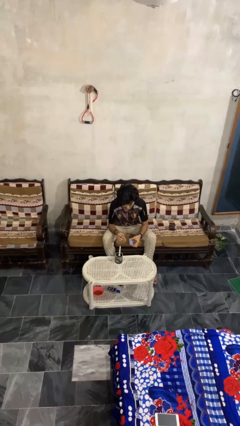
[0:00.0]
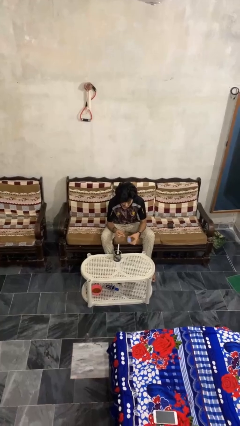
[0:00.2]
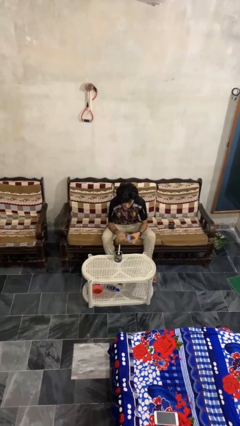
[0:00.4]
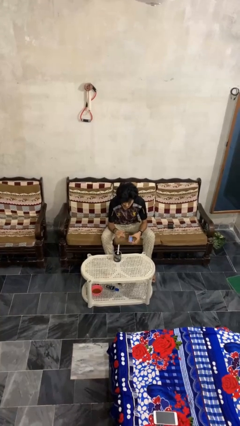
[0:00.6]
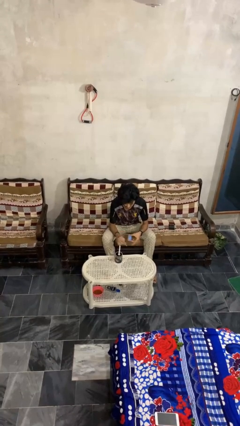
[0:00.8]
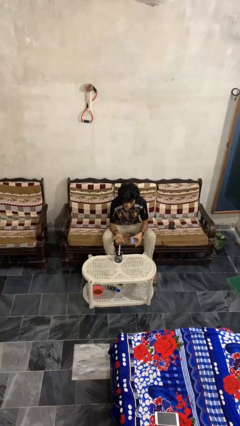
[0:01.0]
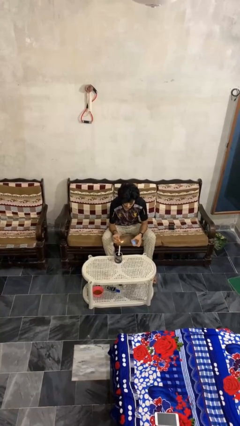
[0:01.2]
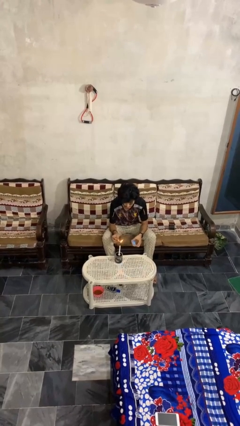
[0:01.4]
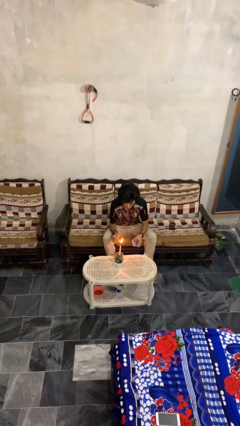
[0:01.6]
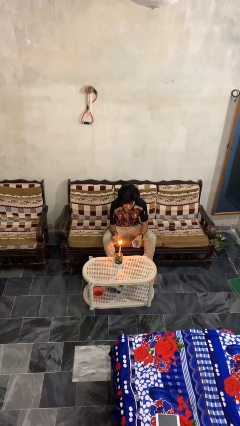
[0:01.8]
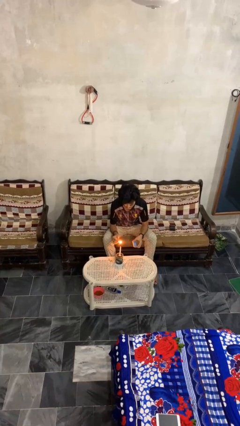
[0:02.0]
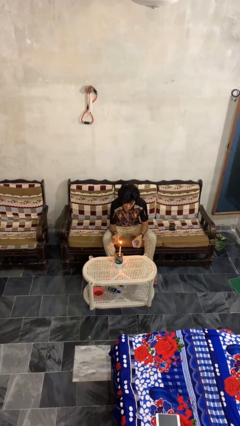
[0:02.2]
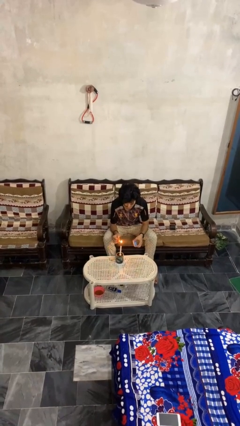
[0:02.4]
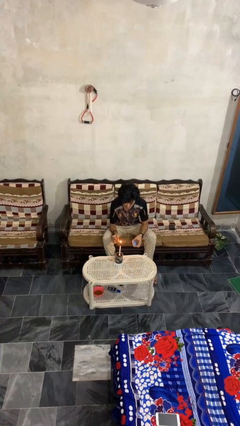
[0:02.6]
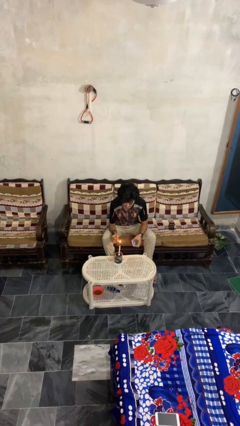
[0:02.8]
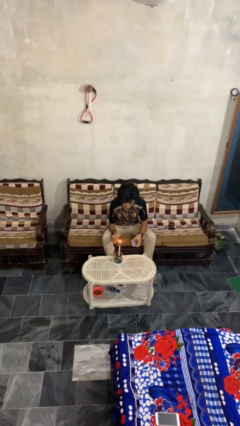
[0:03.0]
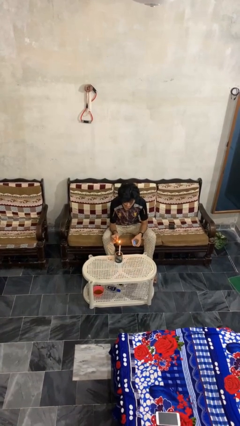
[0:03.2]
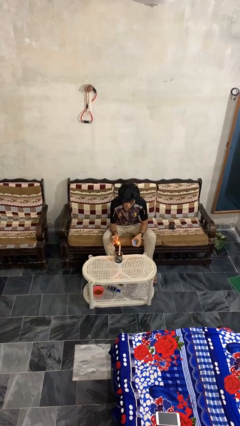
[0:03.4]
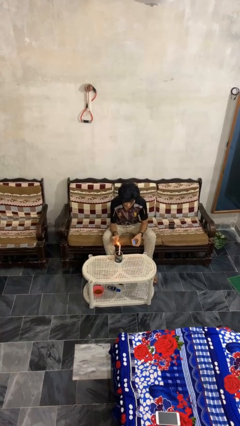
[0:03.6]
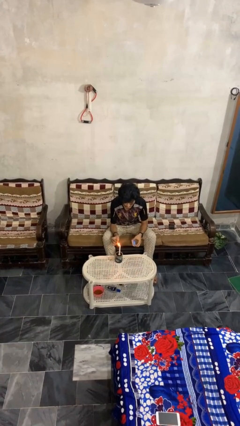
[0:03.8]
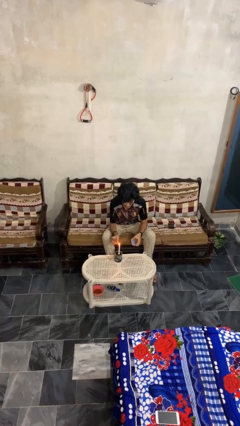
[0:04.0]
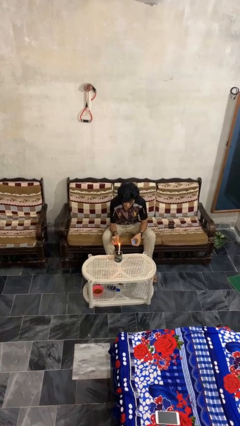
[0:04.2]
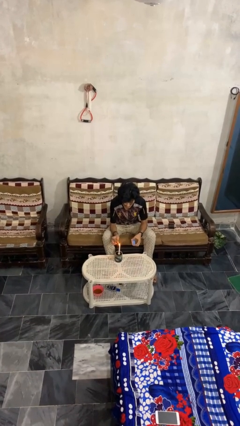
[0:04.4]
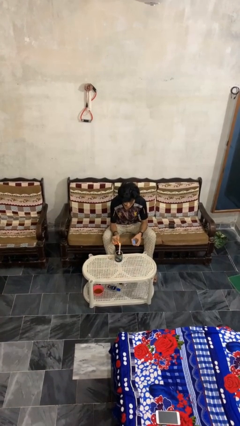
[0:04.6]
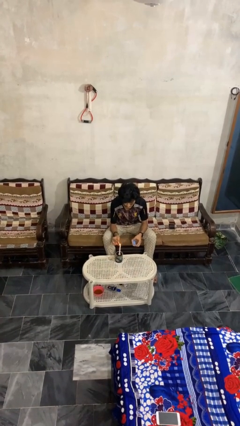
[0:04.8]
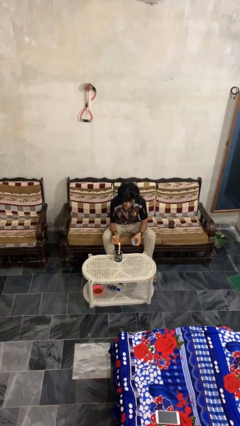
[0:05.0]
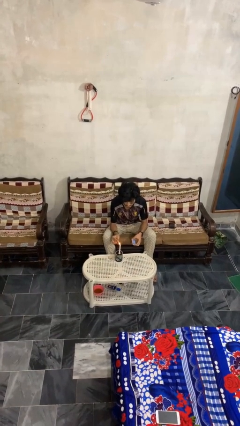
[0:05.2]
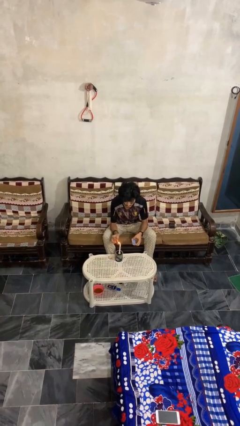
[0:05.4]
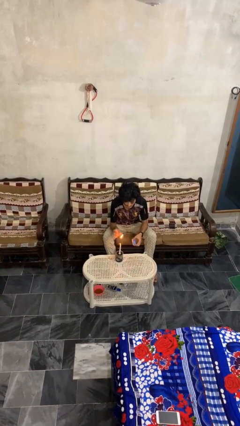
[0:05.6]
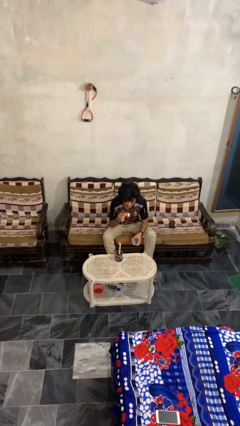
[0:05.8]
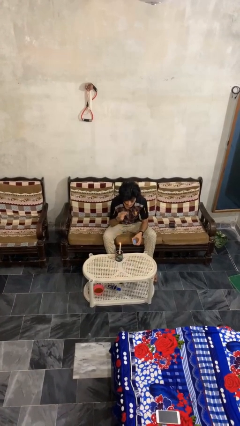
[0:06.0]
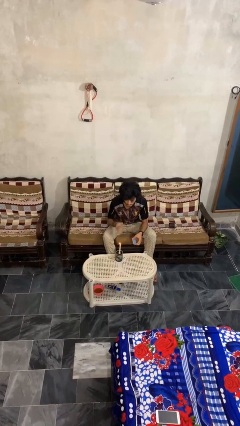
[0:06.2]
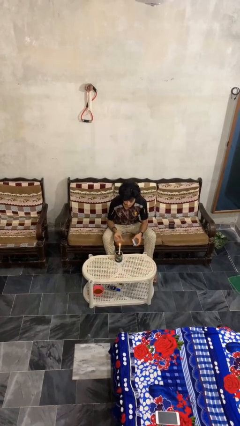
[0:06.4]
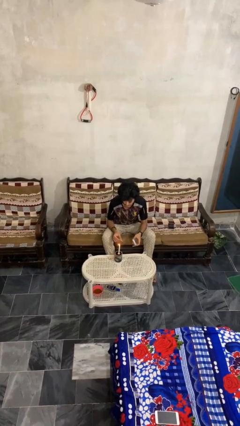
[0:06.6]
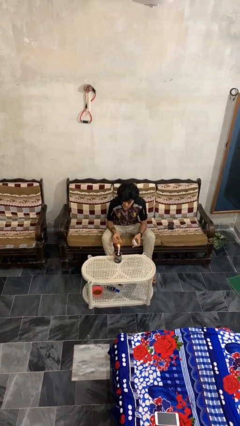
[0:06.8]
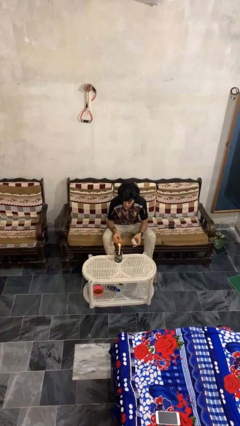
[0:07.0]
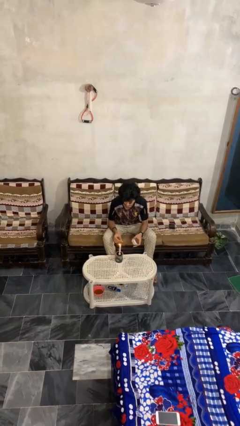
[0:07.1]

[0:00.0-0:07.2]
person lights candle

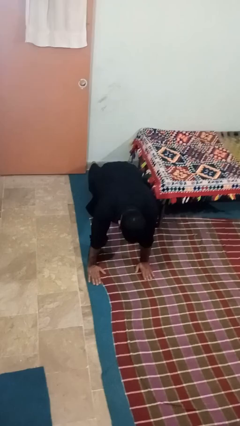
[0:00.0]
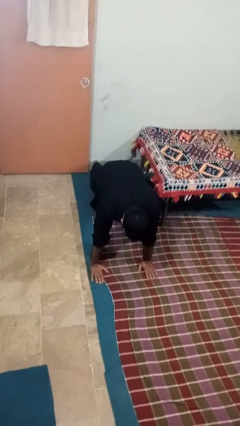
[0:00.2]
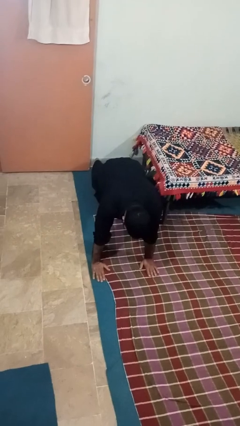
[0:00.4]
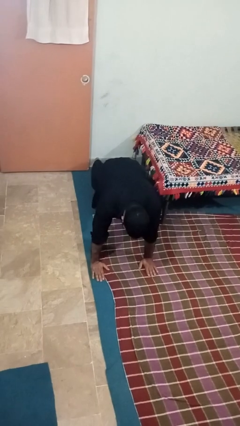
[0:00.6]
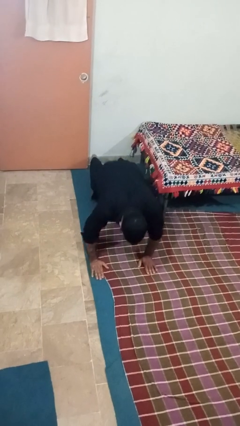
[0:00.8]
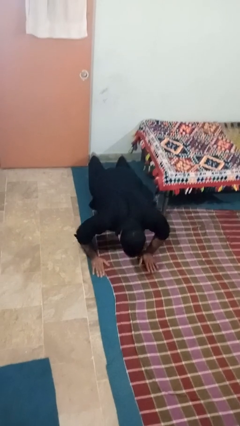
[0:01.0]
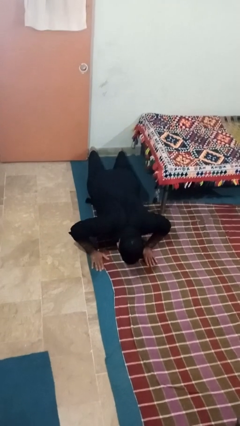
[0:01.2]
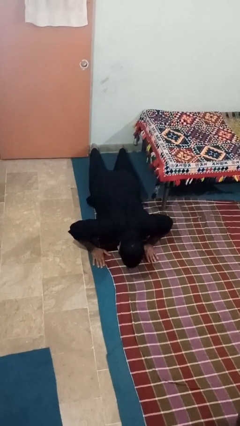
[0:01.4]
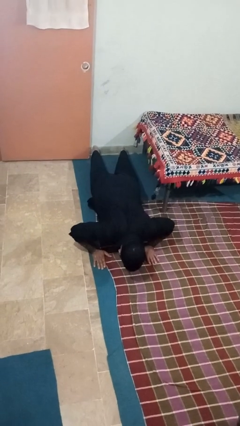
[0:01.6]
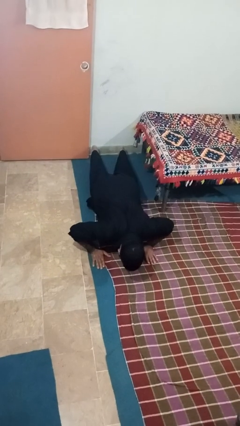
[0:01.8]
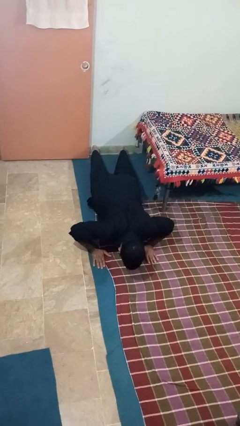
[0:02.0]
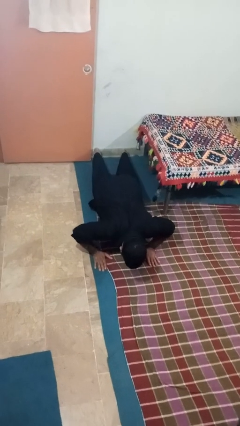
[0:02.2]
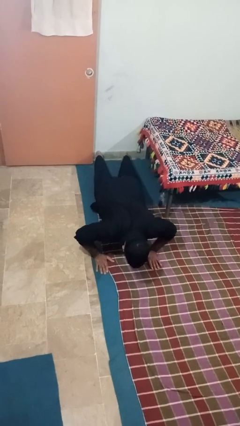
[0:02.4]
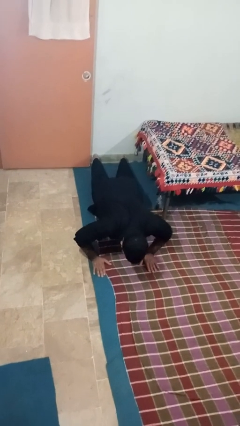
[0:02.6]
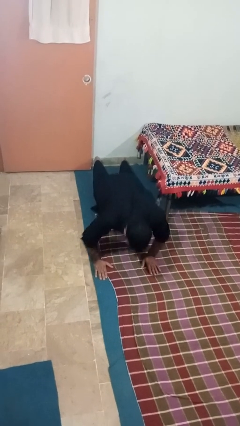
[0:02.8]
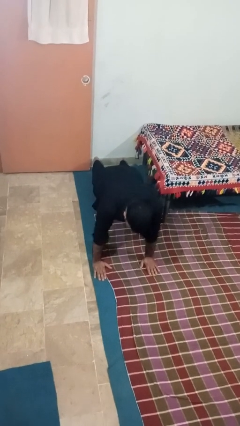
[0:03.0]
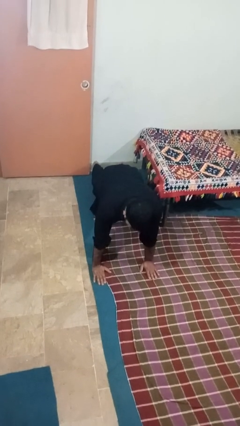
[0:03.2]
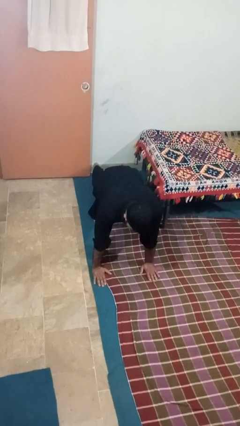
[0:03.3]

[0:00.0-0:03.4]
person exercises with pushup

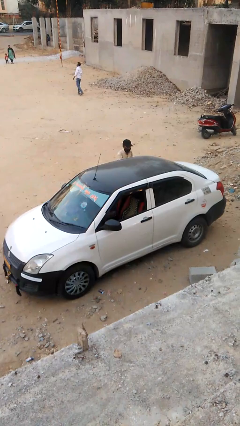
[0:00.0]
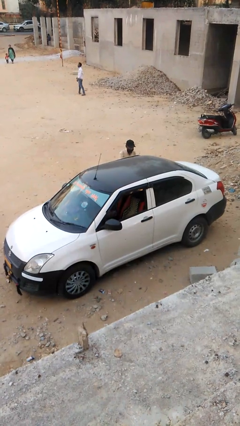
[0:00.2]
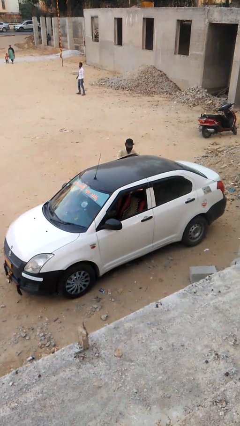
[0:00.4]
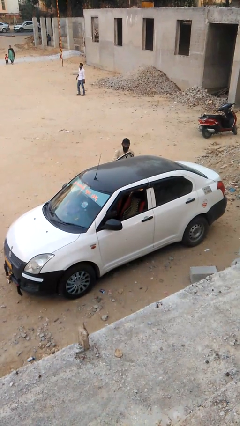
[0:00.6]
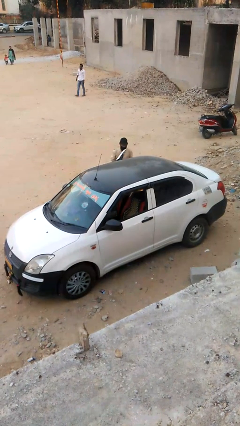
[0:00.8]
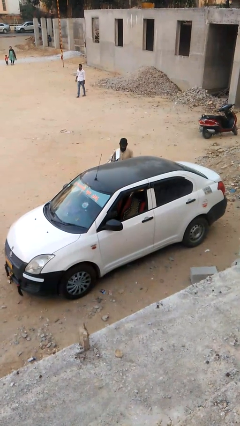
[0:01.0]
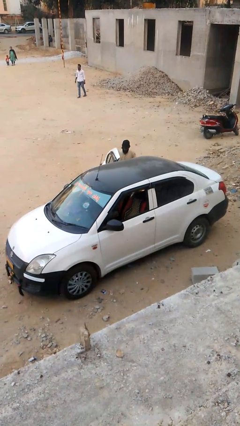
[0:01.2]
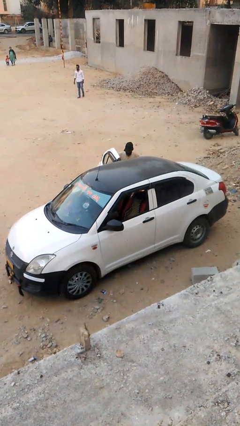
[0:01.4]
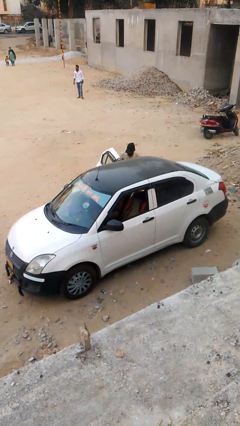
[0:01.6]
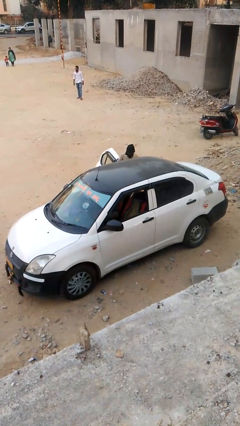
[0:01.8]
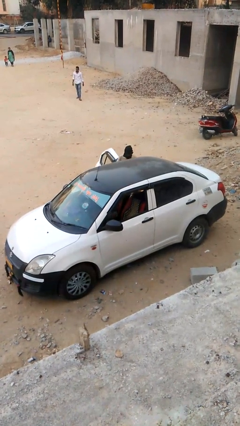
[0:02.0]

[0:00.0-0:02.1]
car picks up person

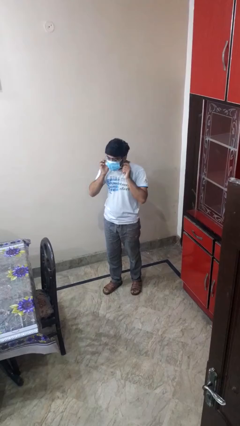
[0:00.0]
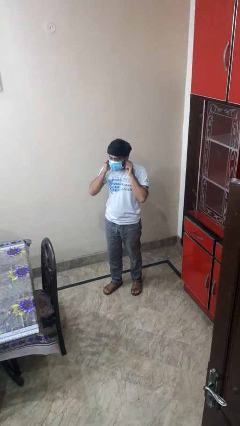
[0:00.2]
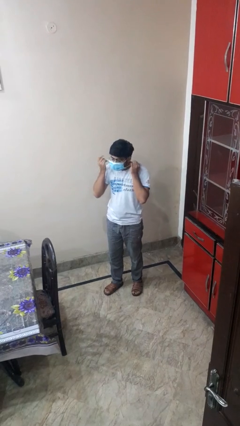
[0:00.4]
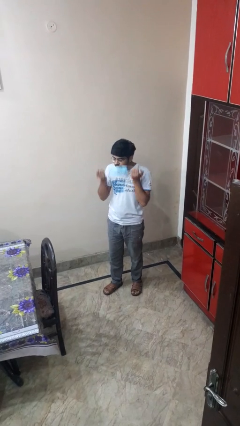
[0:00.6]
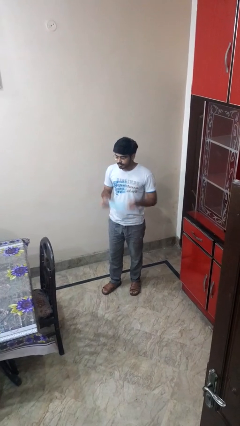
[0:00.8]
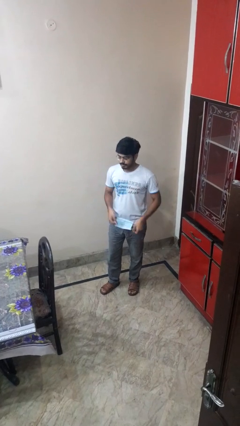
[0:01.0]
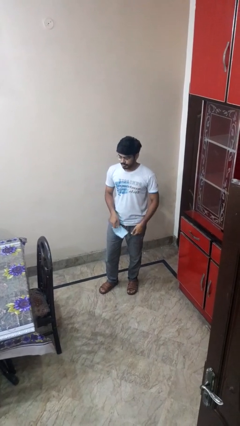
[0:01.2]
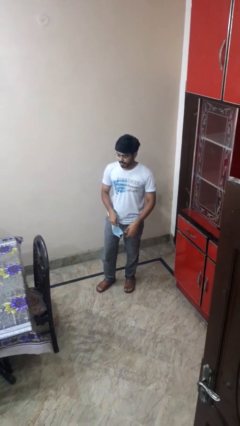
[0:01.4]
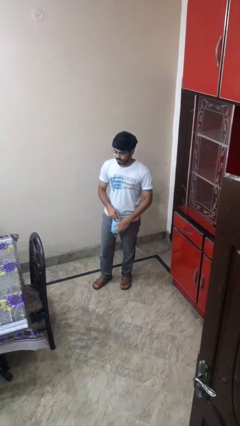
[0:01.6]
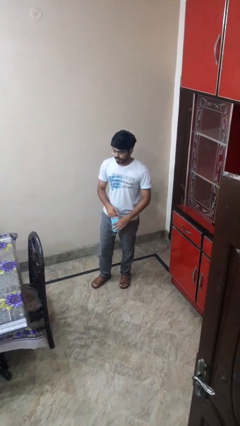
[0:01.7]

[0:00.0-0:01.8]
person takes off facemask

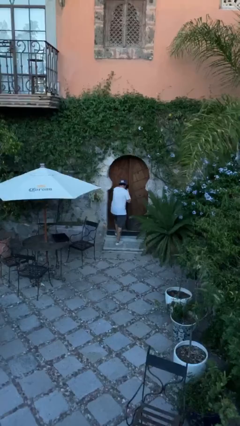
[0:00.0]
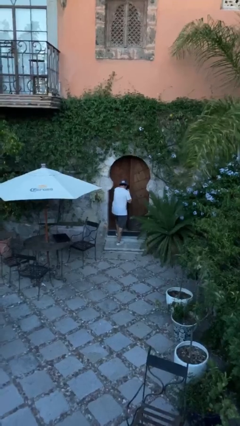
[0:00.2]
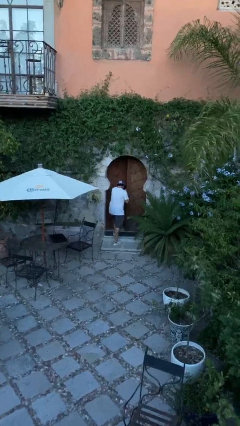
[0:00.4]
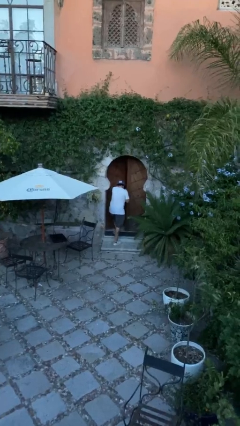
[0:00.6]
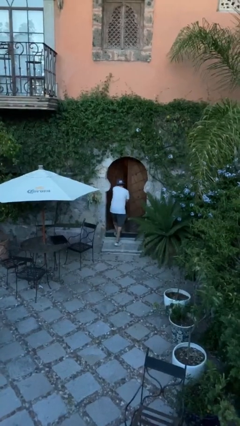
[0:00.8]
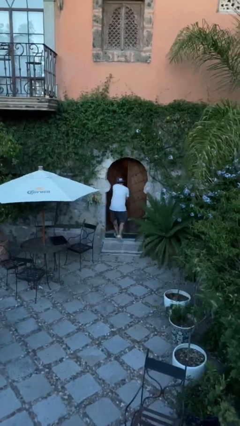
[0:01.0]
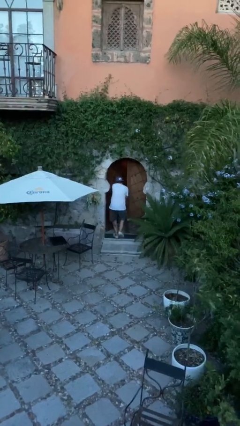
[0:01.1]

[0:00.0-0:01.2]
person opens facility door

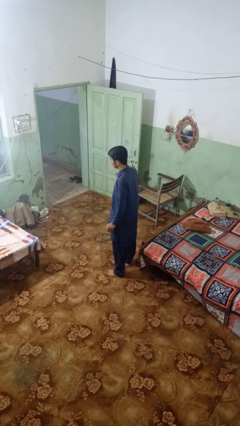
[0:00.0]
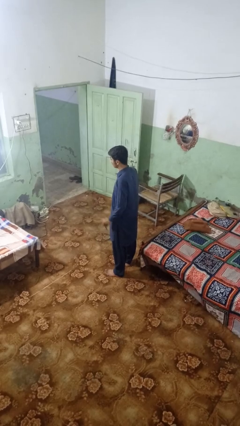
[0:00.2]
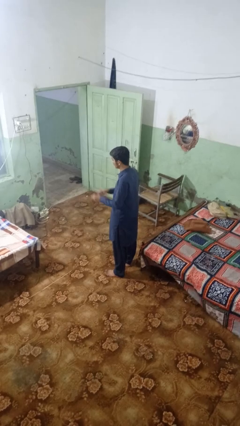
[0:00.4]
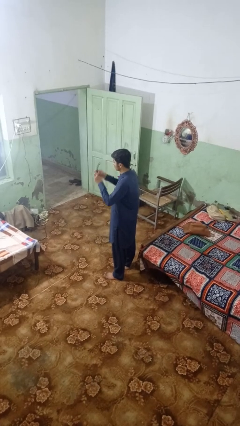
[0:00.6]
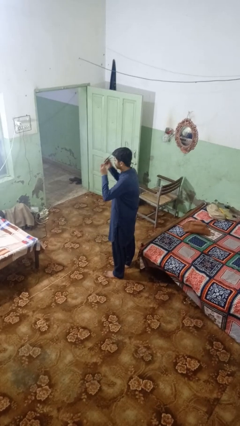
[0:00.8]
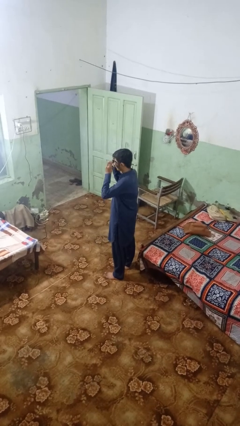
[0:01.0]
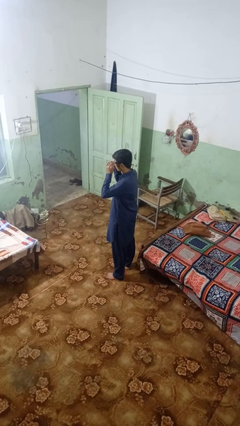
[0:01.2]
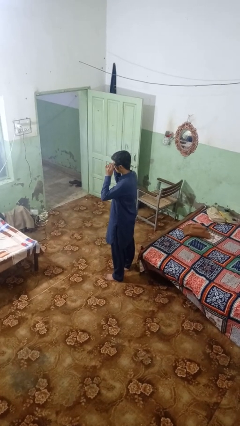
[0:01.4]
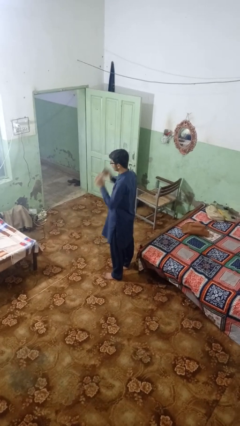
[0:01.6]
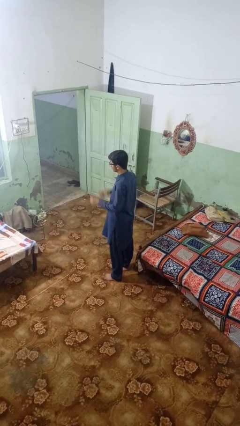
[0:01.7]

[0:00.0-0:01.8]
person puts on glasses
